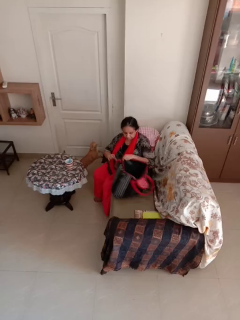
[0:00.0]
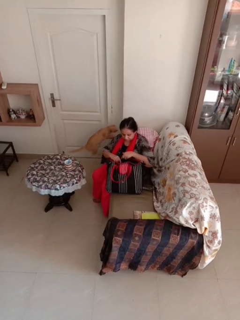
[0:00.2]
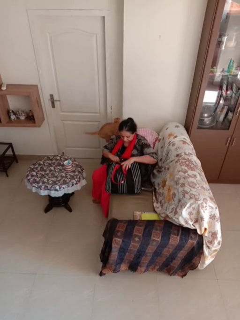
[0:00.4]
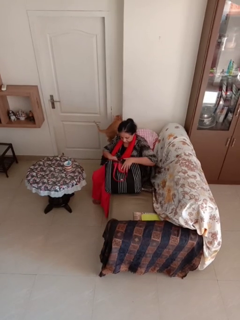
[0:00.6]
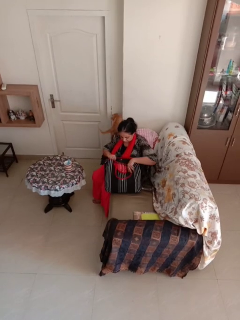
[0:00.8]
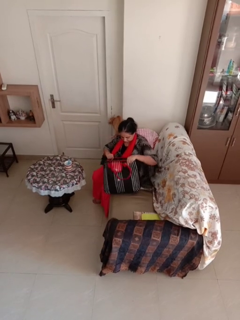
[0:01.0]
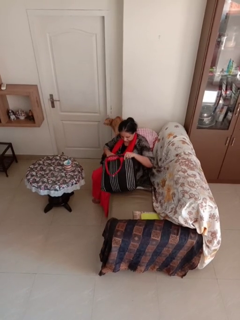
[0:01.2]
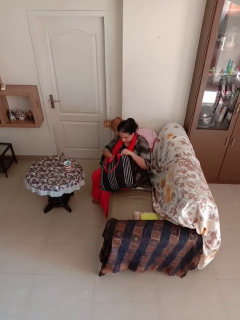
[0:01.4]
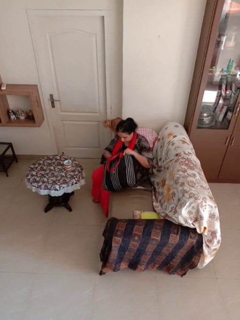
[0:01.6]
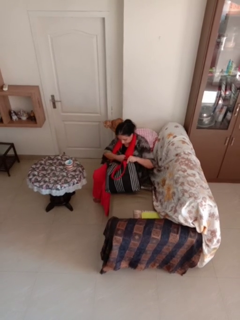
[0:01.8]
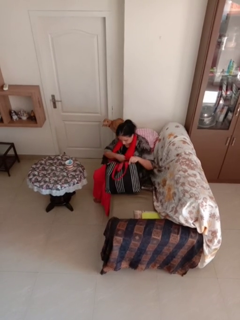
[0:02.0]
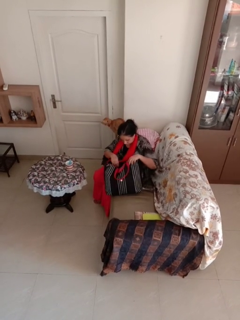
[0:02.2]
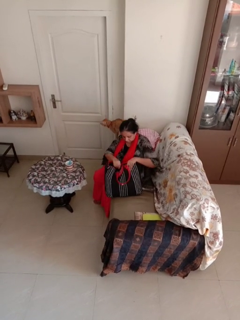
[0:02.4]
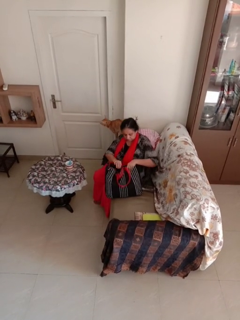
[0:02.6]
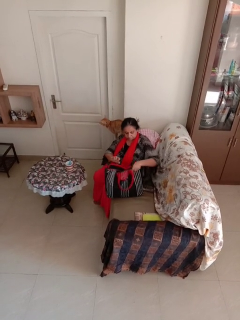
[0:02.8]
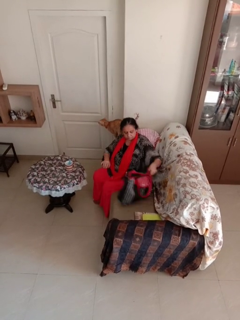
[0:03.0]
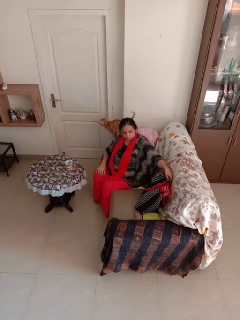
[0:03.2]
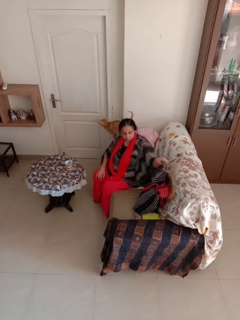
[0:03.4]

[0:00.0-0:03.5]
person searches in bag

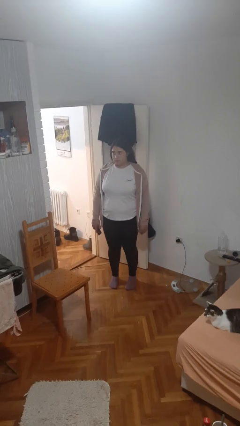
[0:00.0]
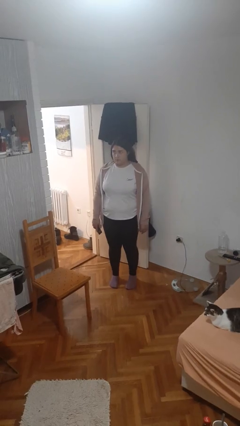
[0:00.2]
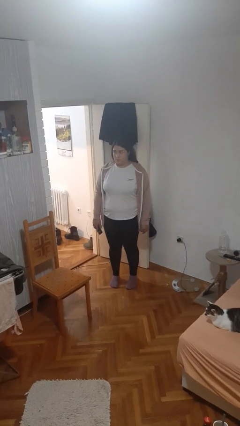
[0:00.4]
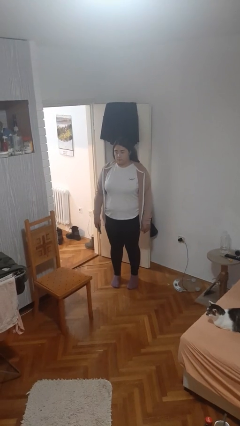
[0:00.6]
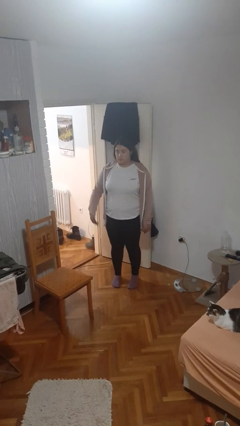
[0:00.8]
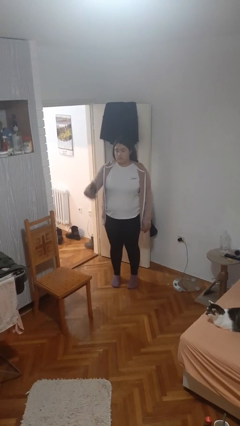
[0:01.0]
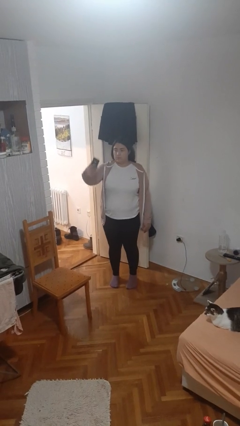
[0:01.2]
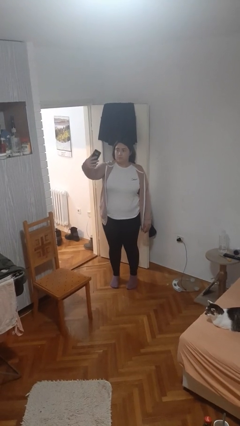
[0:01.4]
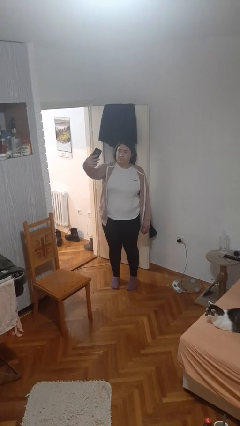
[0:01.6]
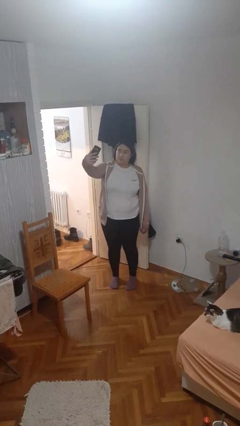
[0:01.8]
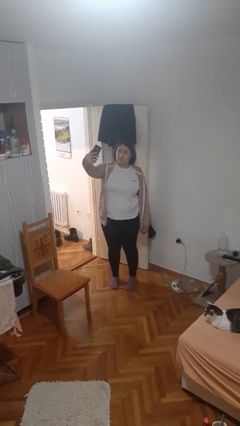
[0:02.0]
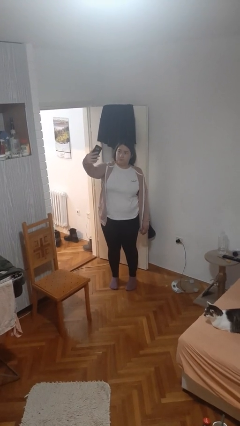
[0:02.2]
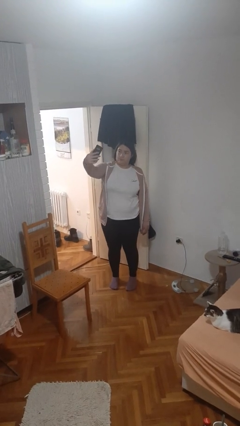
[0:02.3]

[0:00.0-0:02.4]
person takes selfie

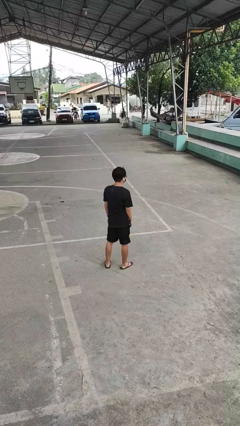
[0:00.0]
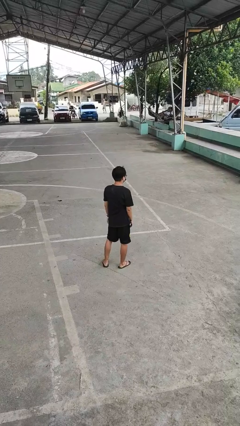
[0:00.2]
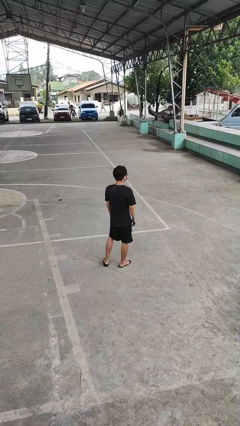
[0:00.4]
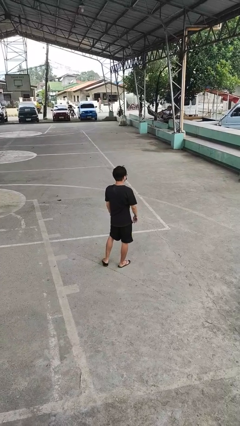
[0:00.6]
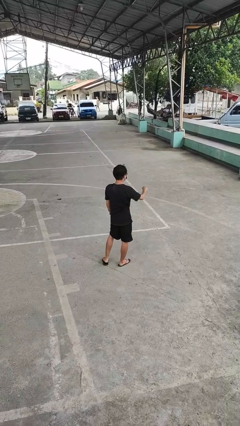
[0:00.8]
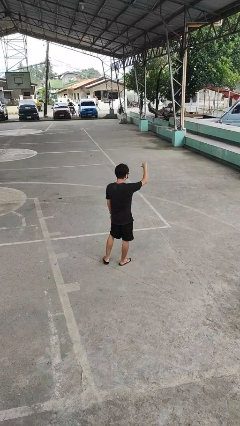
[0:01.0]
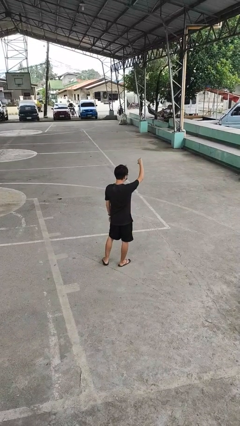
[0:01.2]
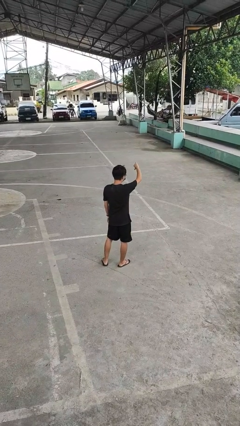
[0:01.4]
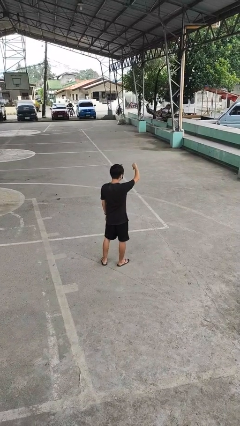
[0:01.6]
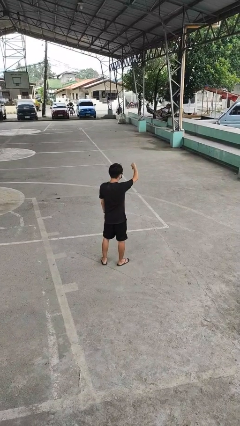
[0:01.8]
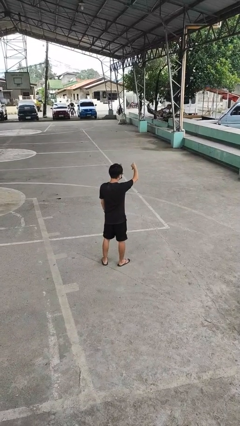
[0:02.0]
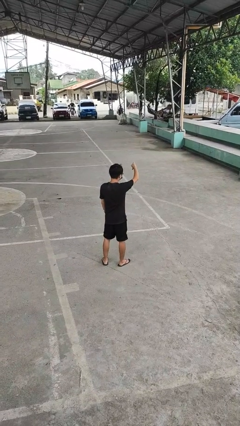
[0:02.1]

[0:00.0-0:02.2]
person gestures thumbs down

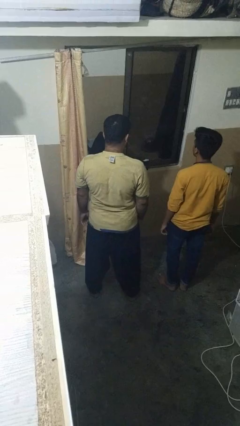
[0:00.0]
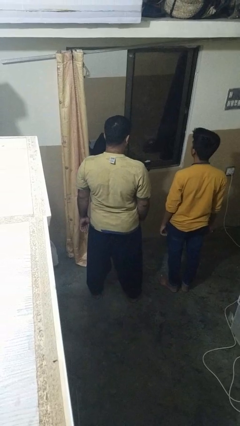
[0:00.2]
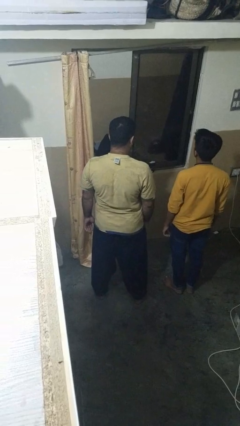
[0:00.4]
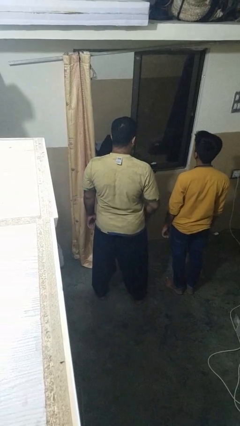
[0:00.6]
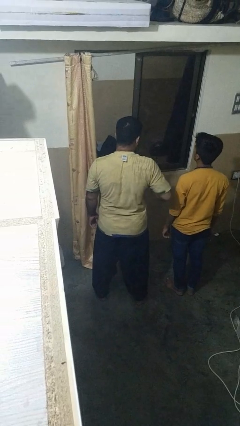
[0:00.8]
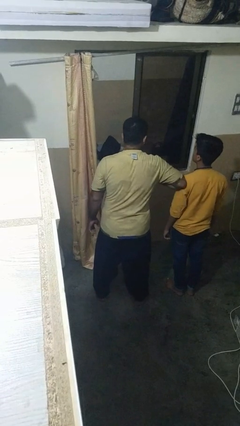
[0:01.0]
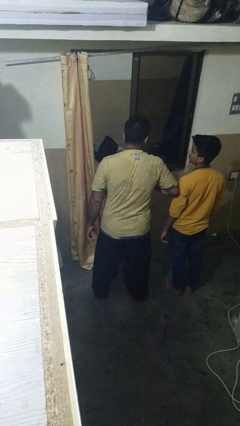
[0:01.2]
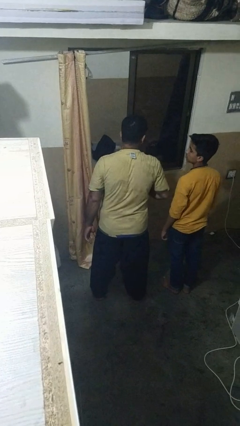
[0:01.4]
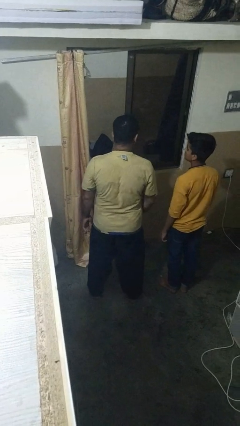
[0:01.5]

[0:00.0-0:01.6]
person nudges person with elbow

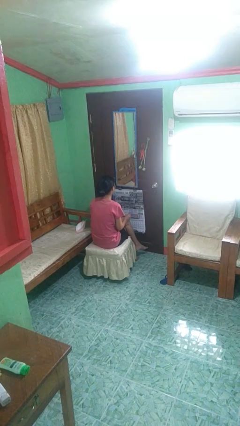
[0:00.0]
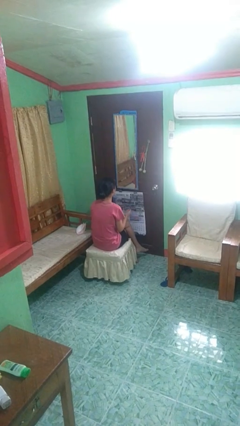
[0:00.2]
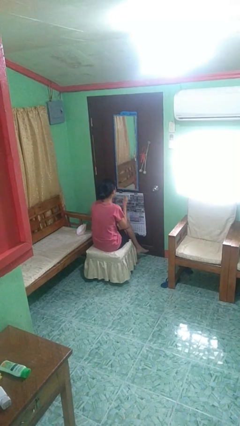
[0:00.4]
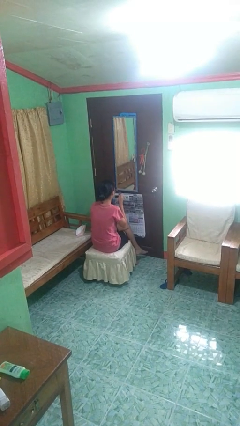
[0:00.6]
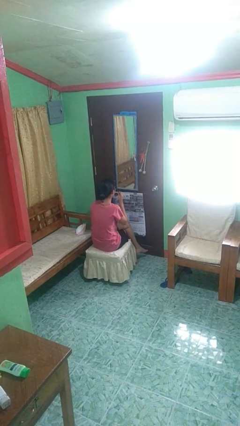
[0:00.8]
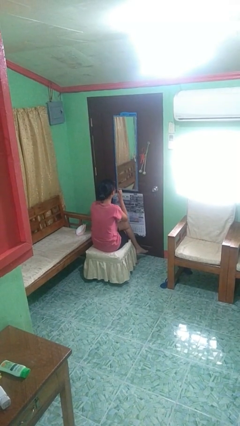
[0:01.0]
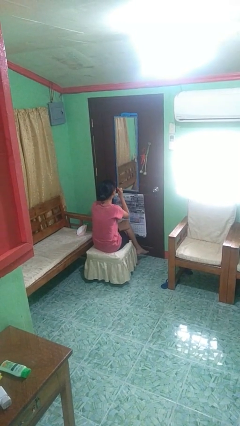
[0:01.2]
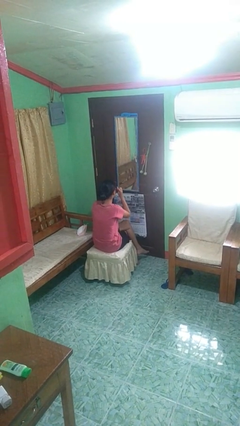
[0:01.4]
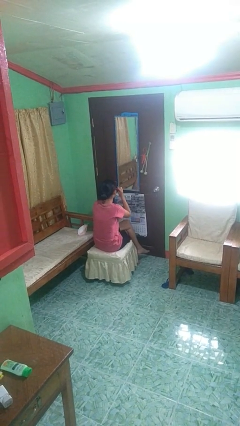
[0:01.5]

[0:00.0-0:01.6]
person puts on sunglasses

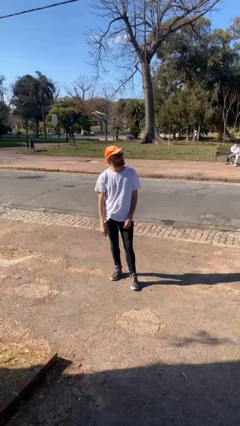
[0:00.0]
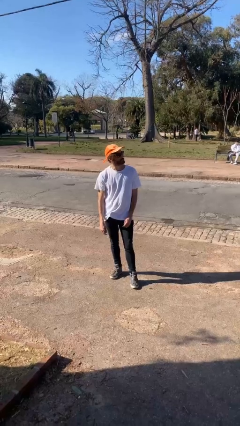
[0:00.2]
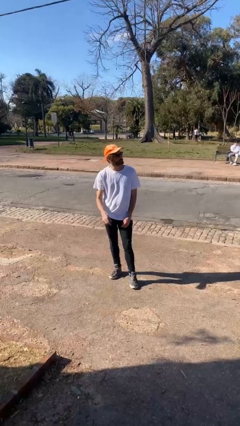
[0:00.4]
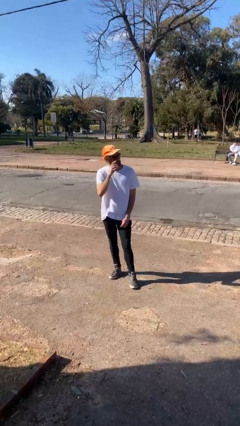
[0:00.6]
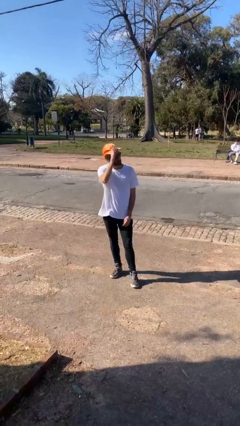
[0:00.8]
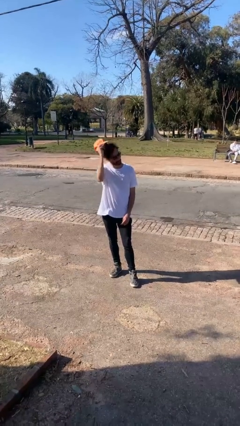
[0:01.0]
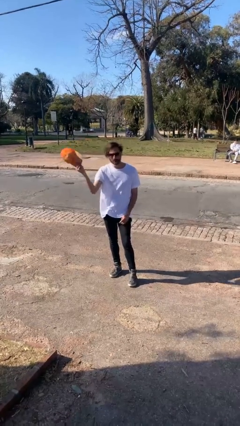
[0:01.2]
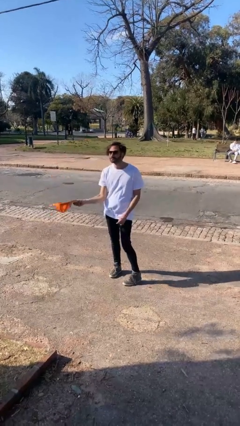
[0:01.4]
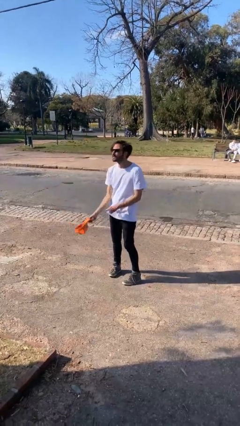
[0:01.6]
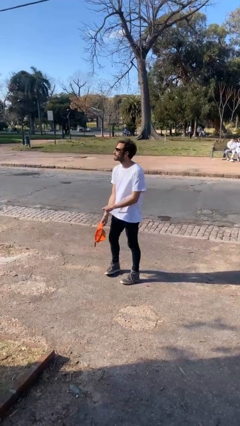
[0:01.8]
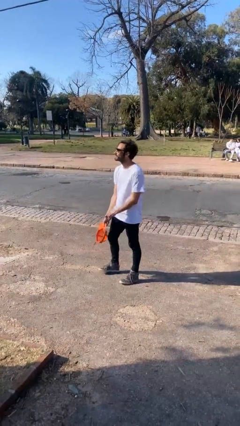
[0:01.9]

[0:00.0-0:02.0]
person takes off hat

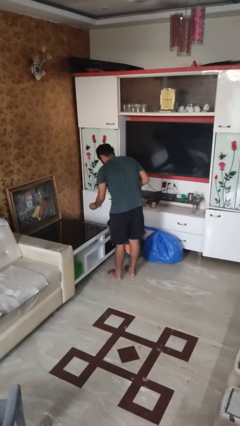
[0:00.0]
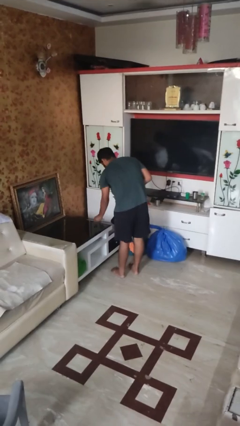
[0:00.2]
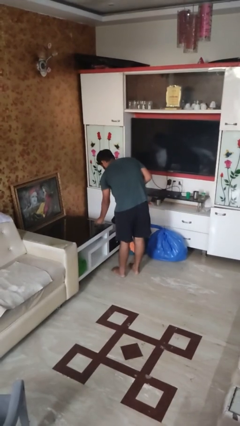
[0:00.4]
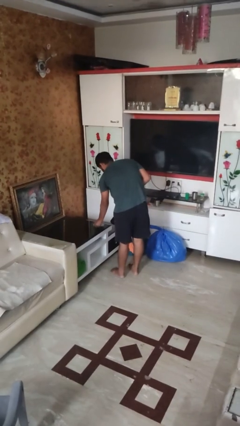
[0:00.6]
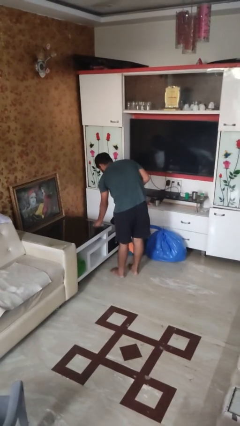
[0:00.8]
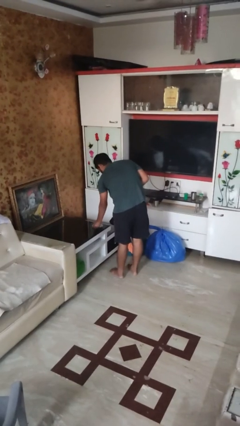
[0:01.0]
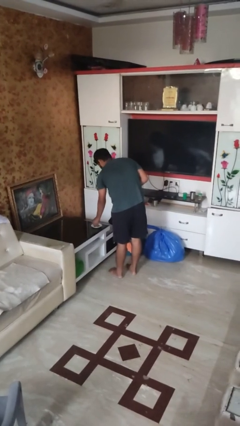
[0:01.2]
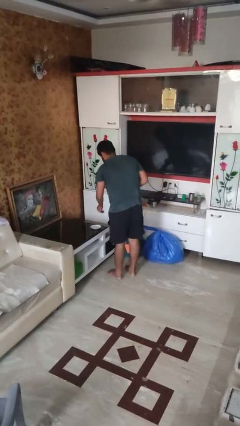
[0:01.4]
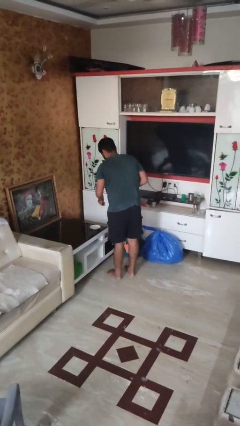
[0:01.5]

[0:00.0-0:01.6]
person sets table

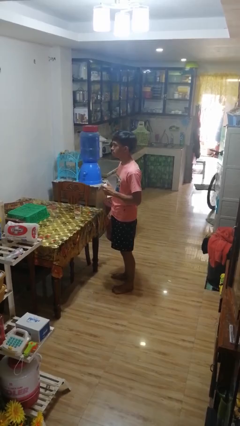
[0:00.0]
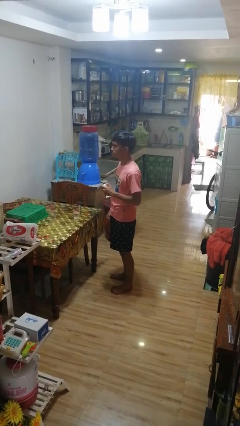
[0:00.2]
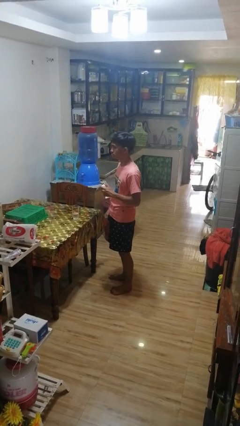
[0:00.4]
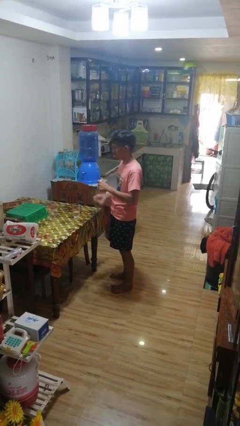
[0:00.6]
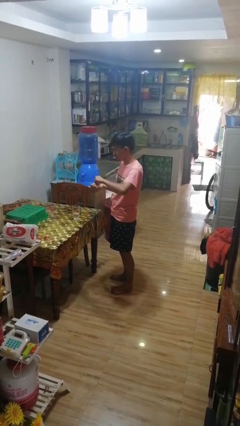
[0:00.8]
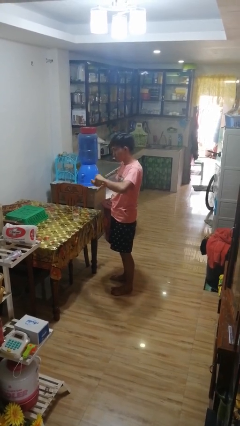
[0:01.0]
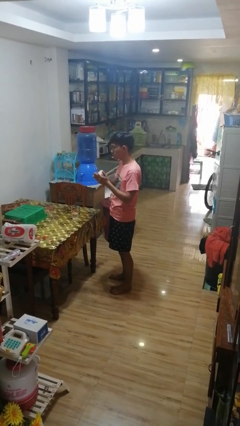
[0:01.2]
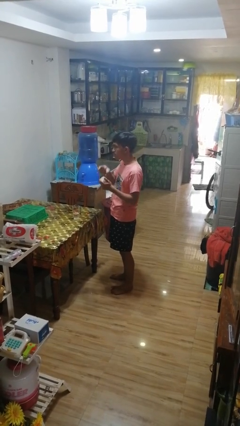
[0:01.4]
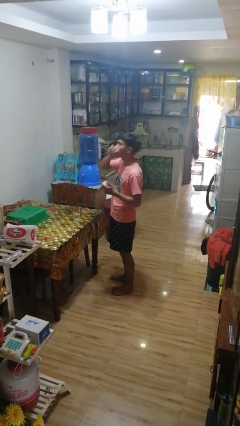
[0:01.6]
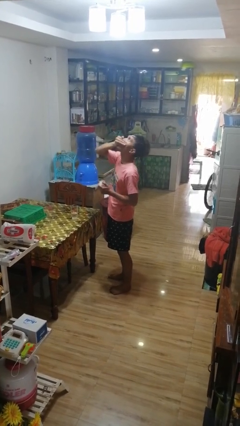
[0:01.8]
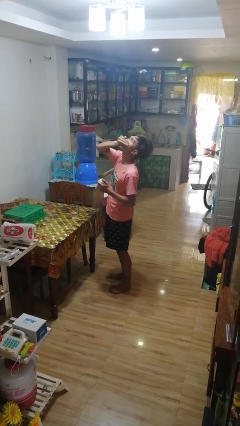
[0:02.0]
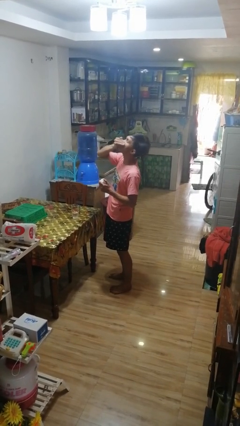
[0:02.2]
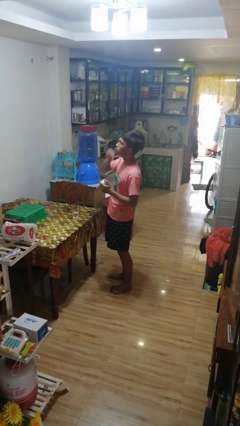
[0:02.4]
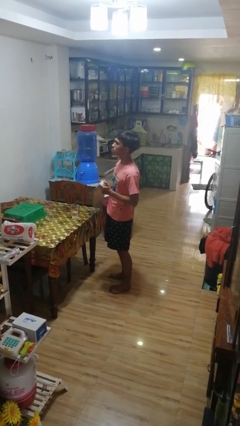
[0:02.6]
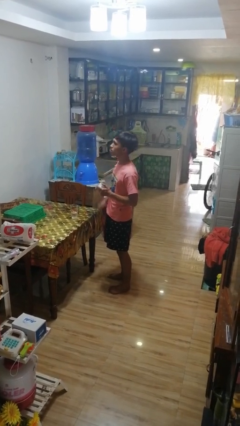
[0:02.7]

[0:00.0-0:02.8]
person takes medicine pills

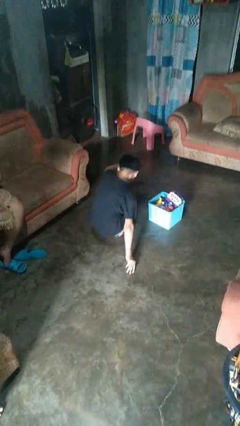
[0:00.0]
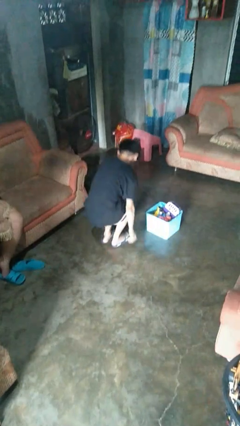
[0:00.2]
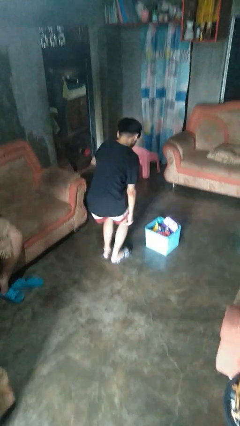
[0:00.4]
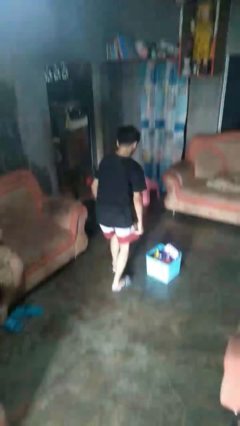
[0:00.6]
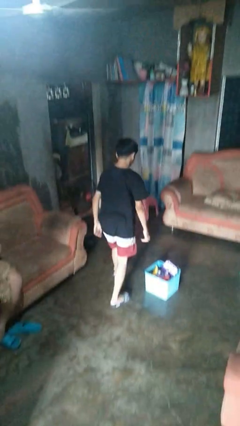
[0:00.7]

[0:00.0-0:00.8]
person stands up from floor
